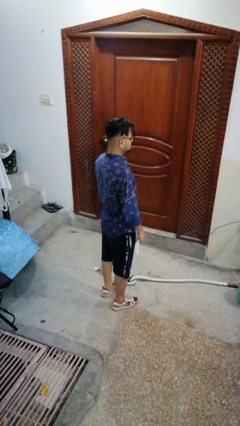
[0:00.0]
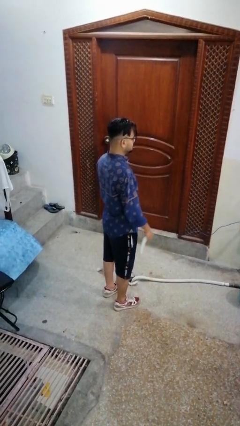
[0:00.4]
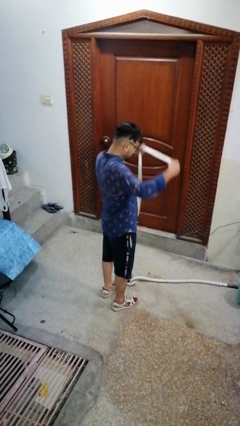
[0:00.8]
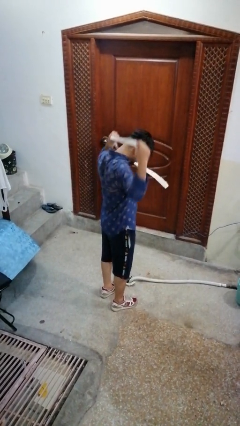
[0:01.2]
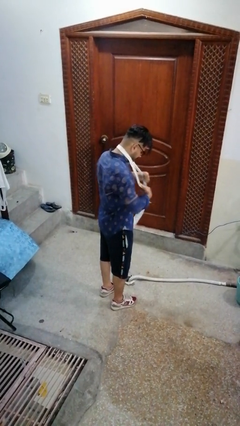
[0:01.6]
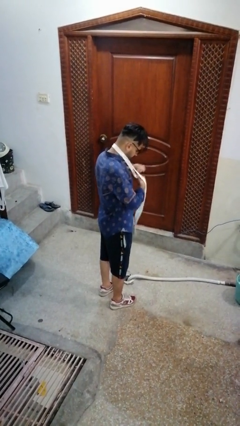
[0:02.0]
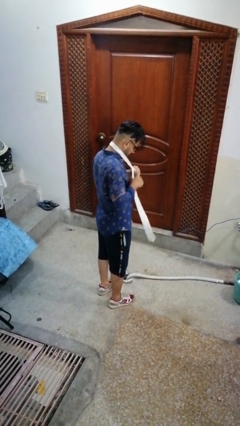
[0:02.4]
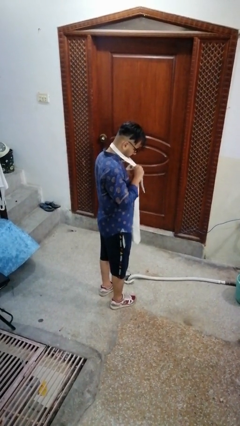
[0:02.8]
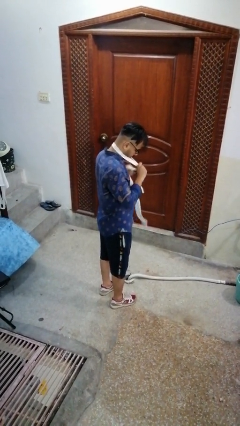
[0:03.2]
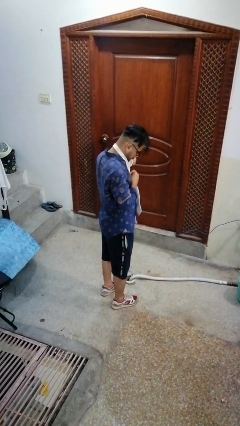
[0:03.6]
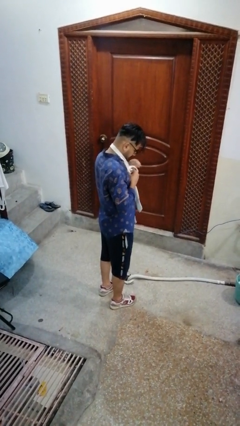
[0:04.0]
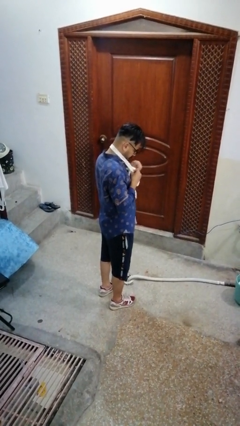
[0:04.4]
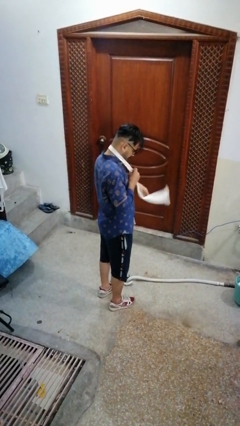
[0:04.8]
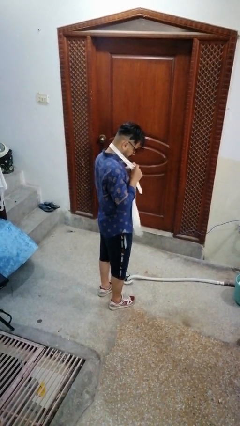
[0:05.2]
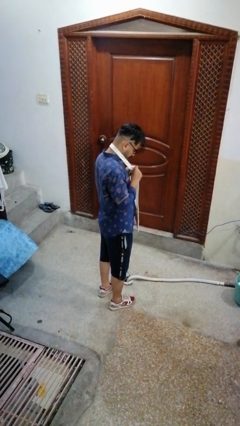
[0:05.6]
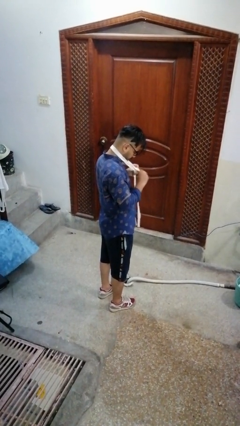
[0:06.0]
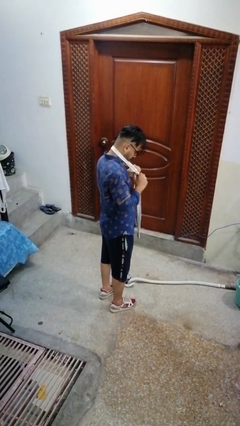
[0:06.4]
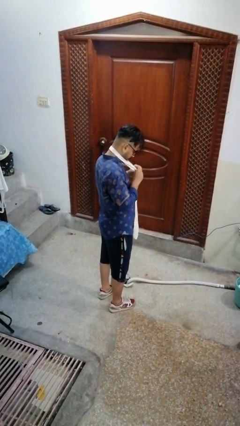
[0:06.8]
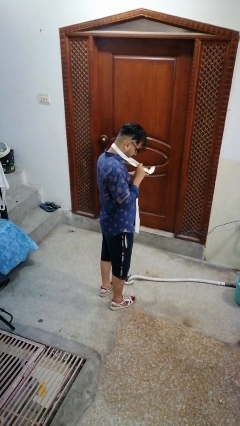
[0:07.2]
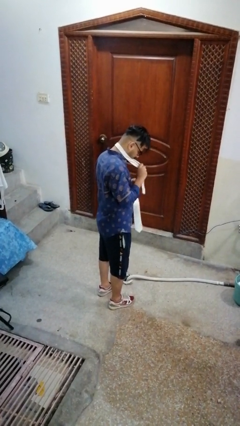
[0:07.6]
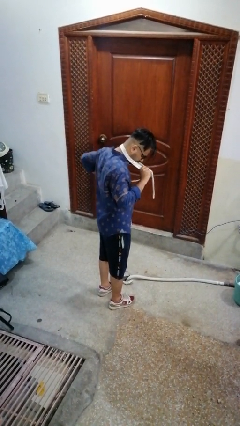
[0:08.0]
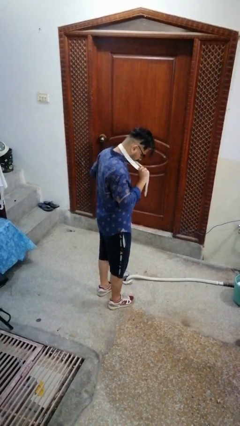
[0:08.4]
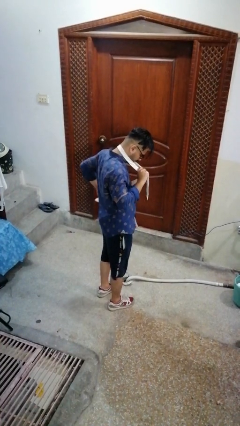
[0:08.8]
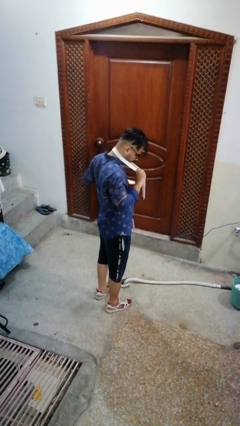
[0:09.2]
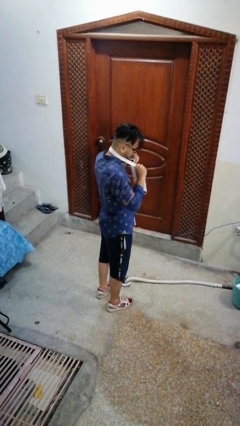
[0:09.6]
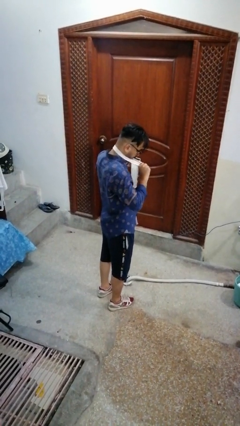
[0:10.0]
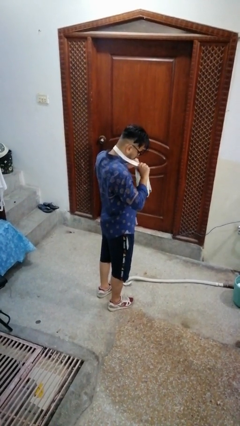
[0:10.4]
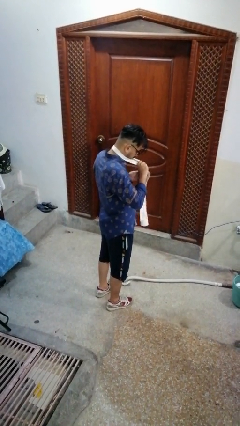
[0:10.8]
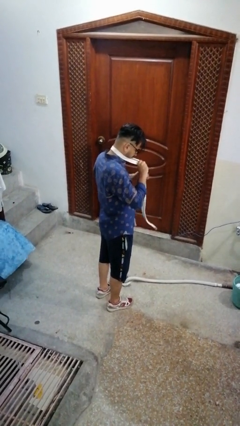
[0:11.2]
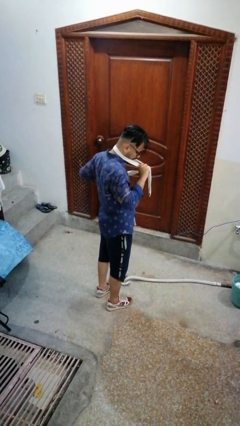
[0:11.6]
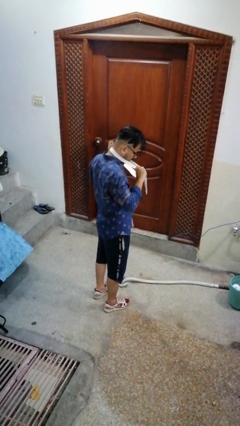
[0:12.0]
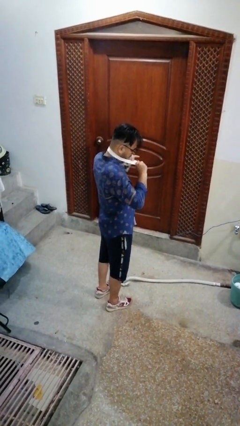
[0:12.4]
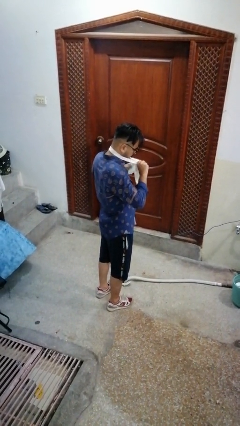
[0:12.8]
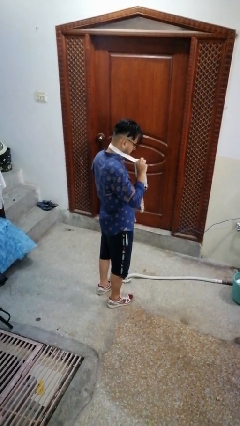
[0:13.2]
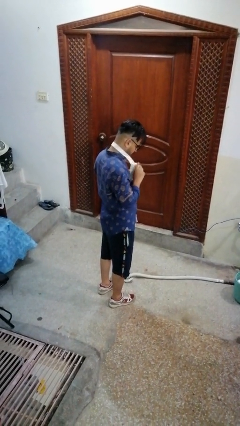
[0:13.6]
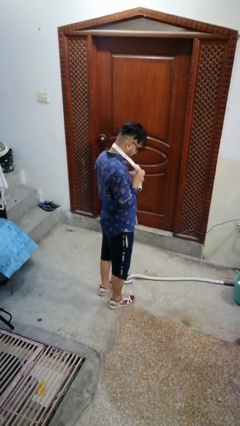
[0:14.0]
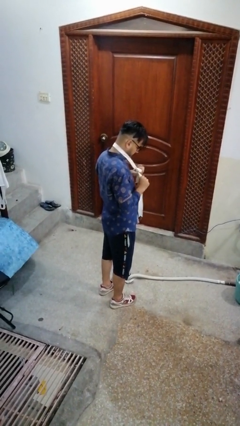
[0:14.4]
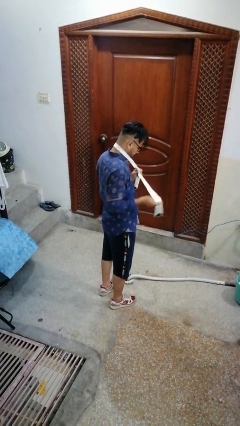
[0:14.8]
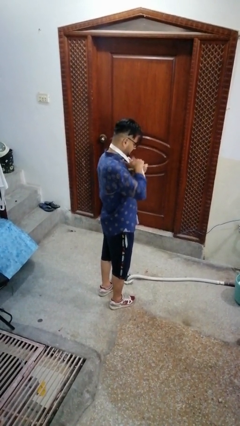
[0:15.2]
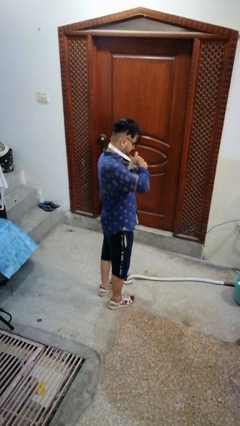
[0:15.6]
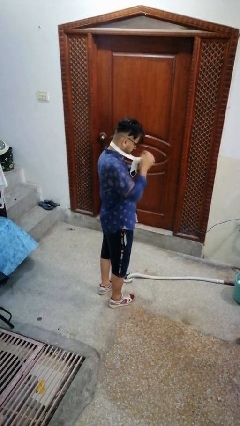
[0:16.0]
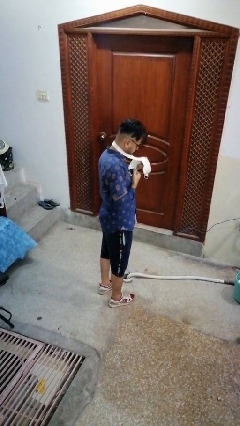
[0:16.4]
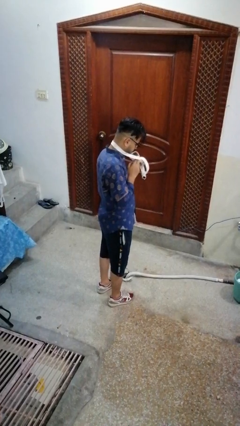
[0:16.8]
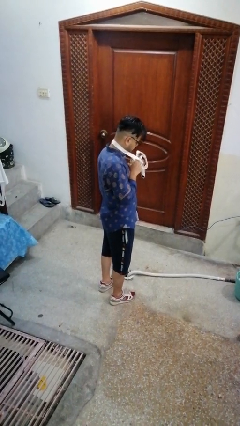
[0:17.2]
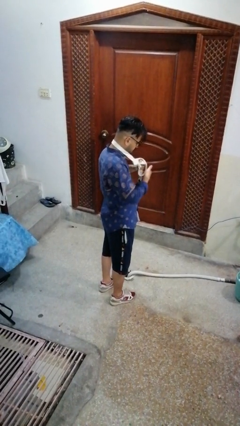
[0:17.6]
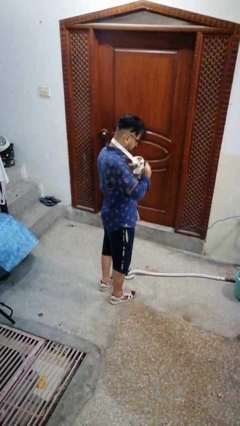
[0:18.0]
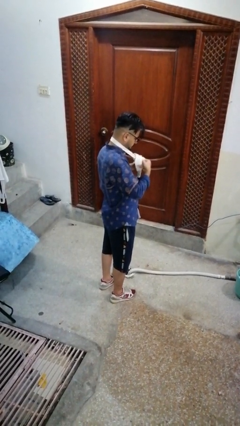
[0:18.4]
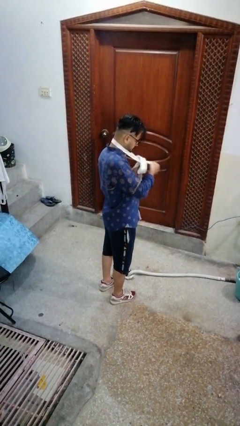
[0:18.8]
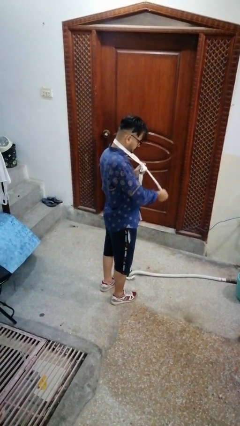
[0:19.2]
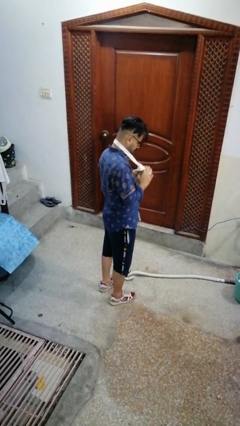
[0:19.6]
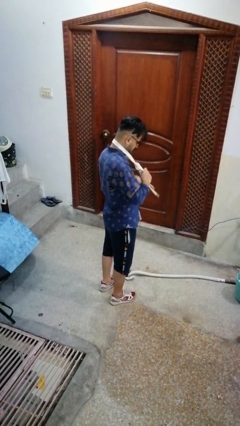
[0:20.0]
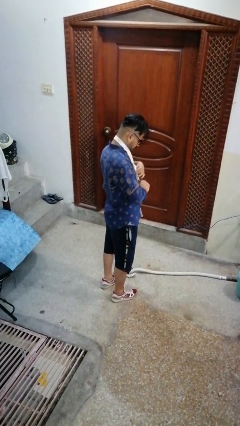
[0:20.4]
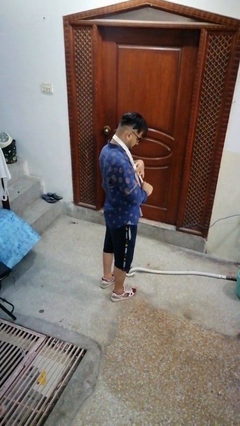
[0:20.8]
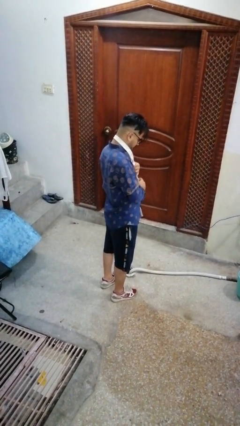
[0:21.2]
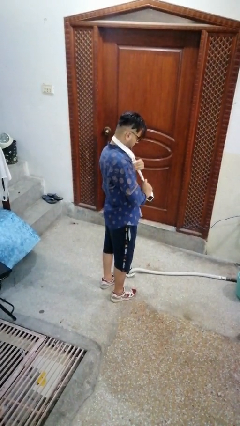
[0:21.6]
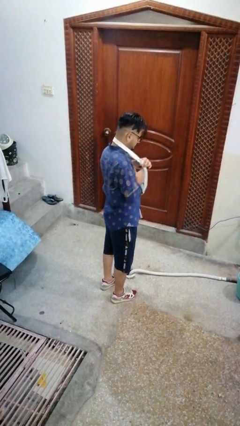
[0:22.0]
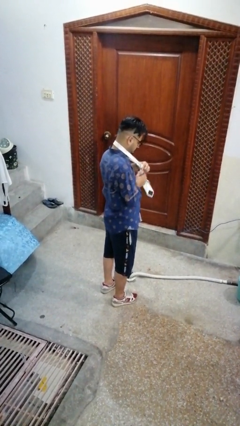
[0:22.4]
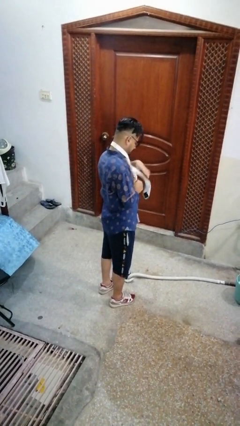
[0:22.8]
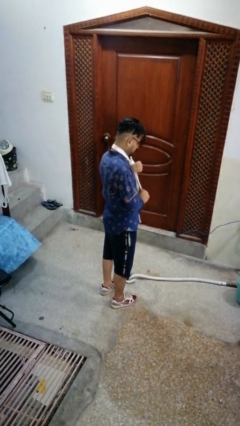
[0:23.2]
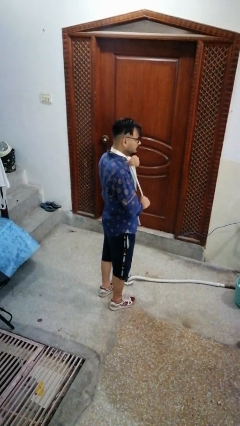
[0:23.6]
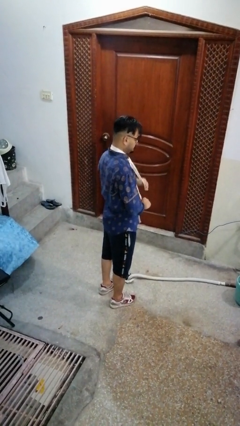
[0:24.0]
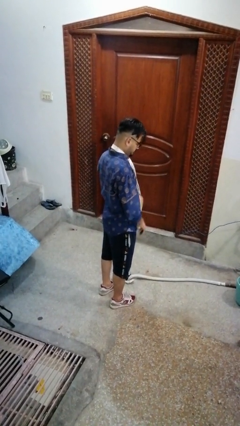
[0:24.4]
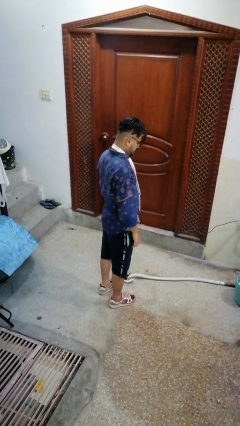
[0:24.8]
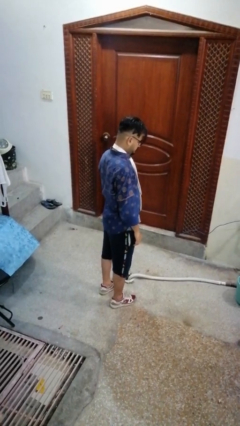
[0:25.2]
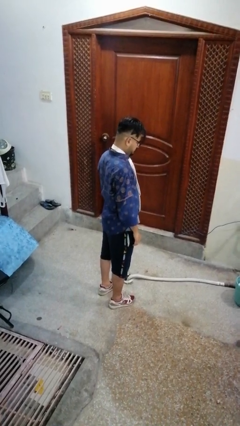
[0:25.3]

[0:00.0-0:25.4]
person puts on necktie

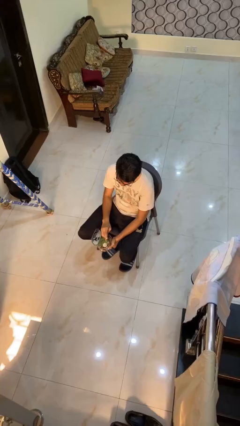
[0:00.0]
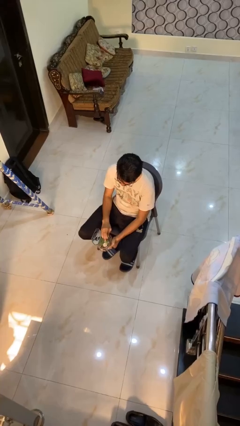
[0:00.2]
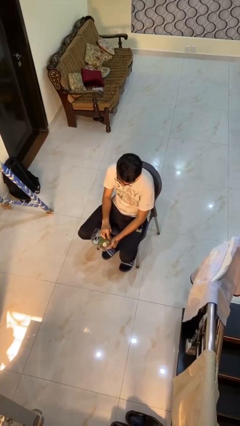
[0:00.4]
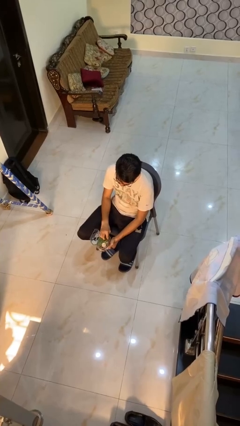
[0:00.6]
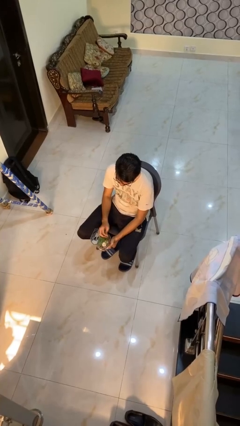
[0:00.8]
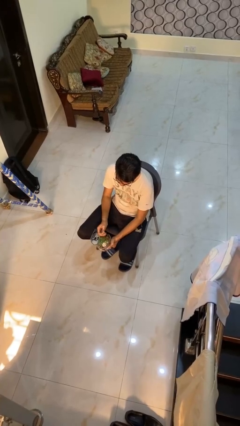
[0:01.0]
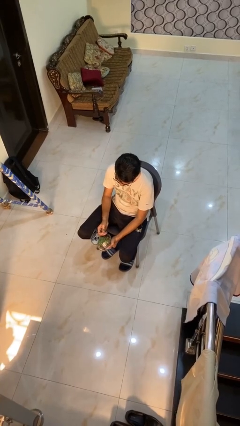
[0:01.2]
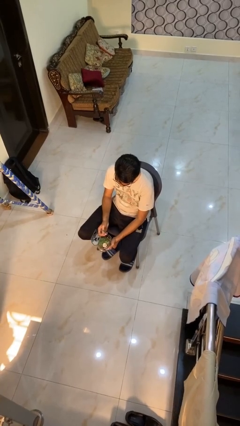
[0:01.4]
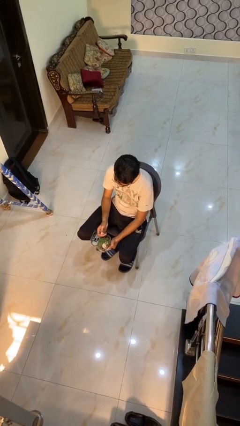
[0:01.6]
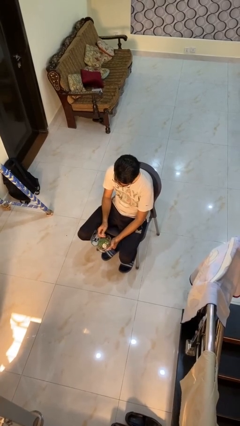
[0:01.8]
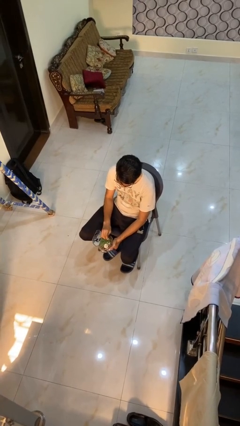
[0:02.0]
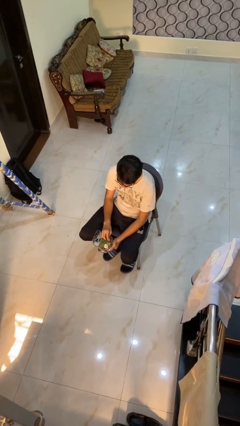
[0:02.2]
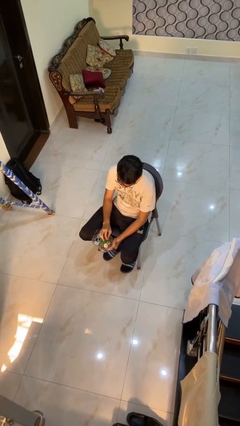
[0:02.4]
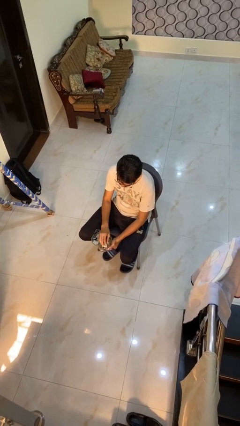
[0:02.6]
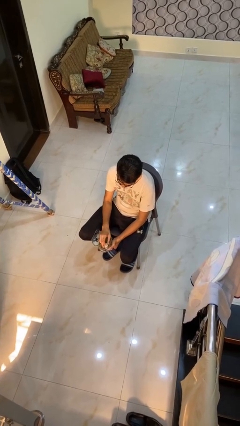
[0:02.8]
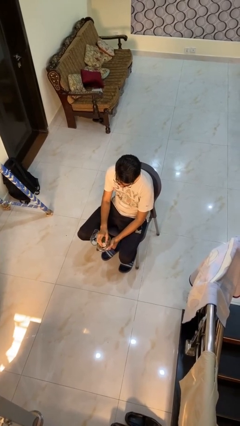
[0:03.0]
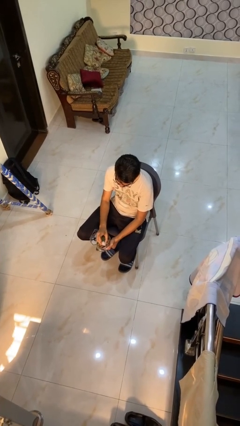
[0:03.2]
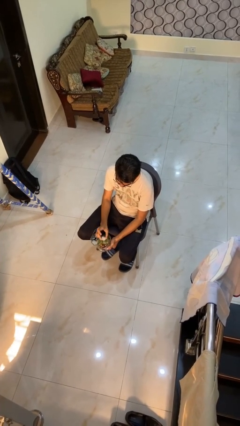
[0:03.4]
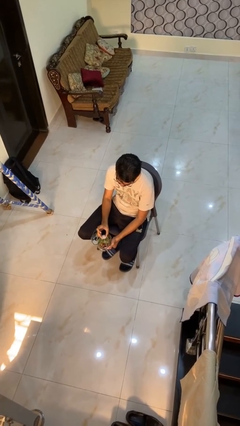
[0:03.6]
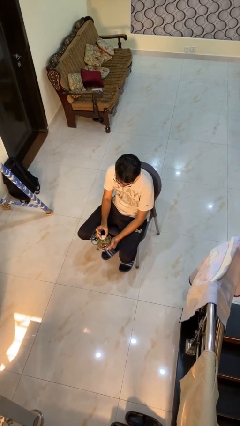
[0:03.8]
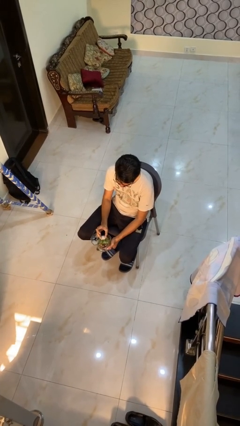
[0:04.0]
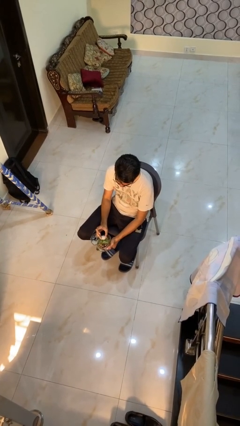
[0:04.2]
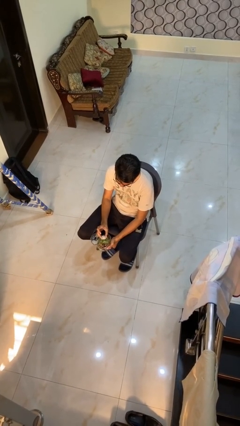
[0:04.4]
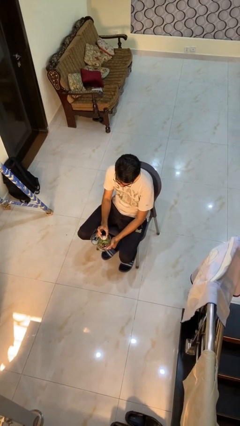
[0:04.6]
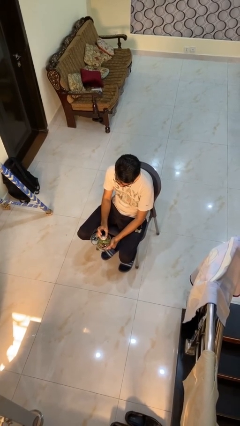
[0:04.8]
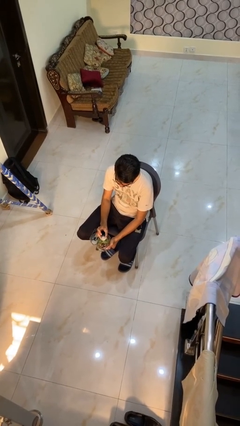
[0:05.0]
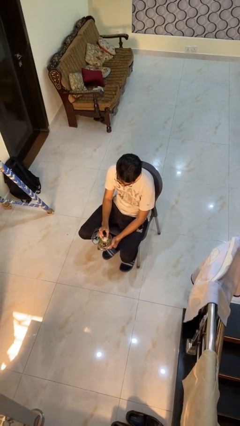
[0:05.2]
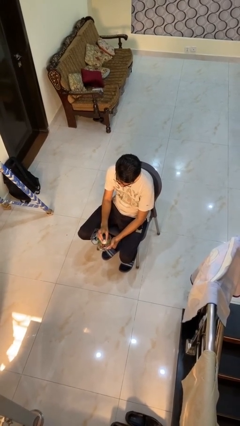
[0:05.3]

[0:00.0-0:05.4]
person searches jewelry box
